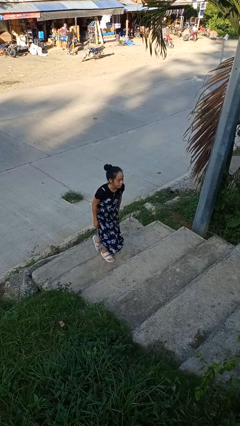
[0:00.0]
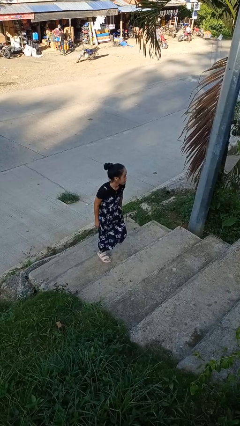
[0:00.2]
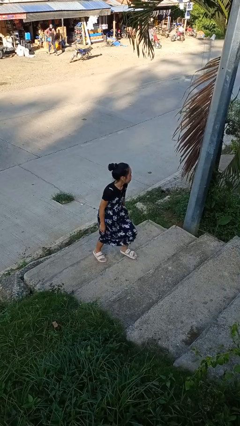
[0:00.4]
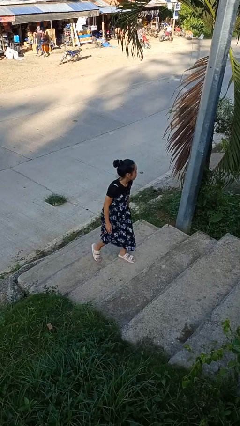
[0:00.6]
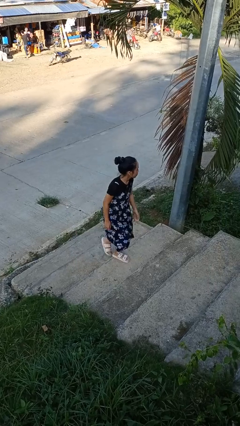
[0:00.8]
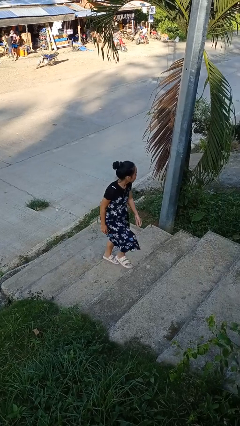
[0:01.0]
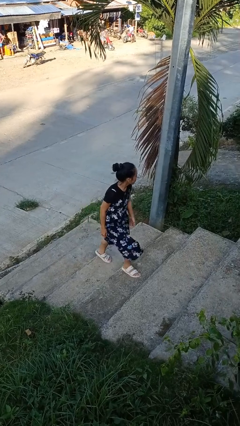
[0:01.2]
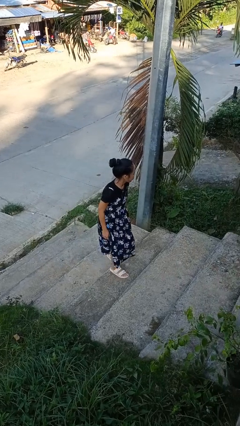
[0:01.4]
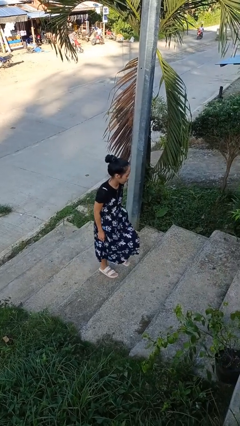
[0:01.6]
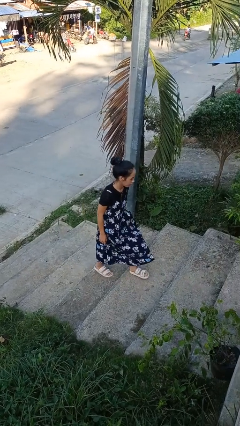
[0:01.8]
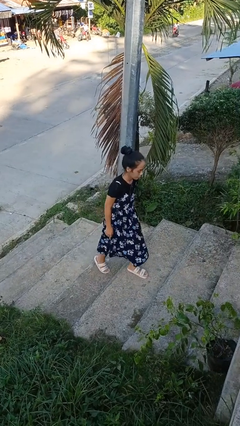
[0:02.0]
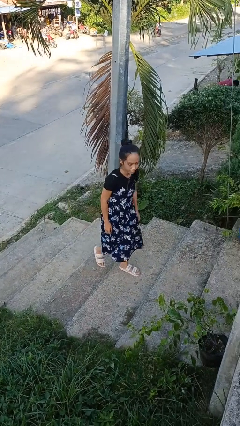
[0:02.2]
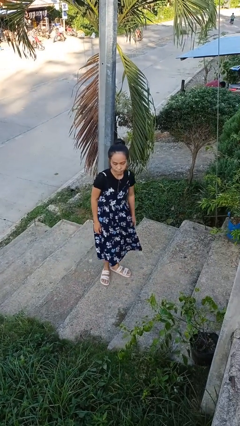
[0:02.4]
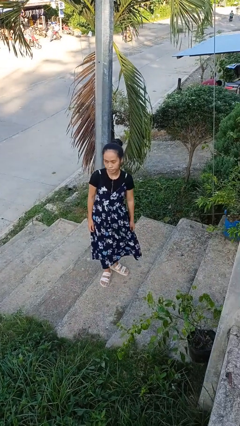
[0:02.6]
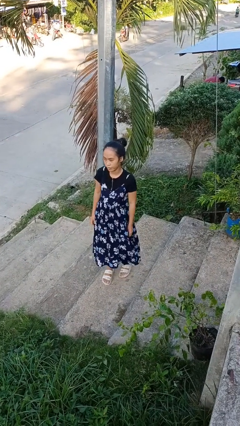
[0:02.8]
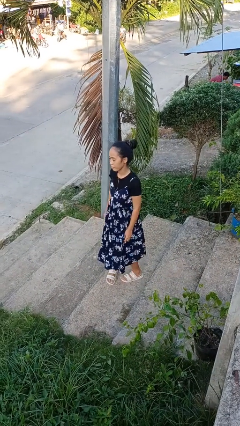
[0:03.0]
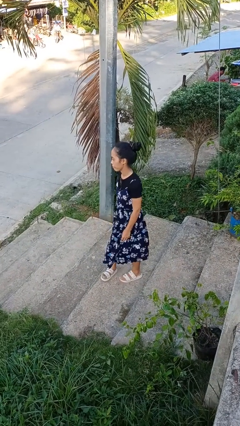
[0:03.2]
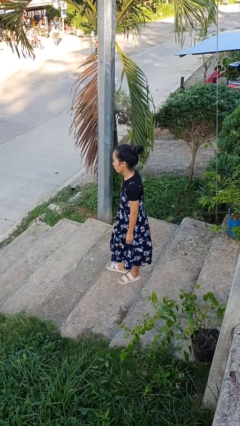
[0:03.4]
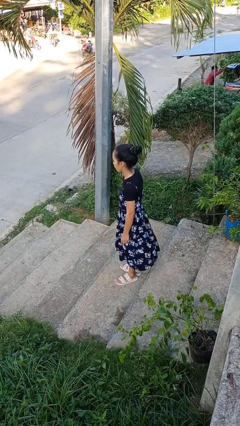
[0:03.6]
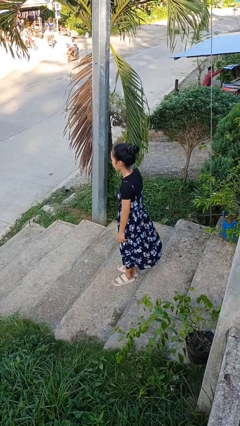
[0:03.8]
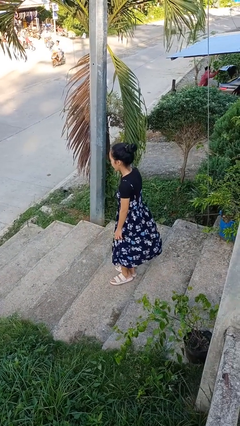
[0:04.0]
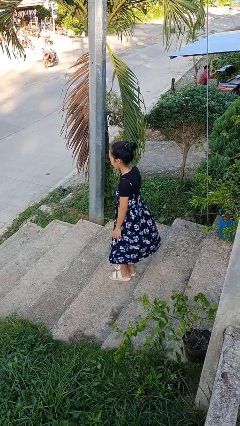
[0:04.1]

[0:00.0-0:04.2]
person climbs up stairs

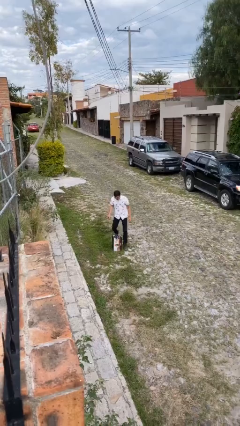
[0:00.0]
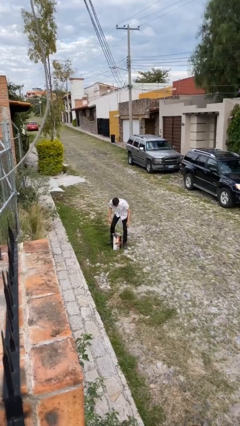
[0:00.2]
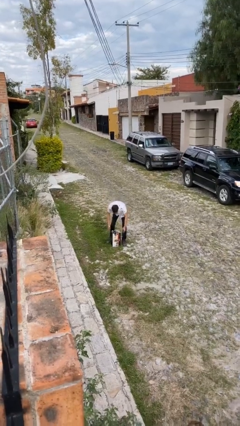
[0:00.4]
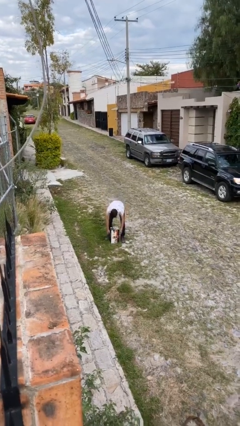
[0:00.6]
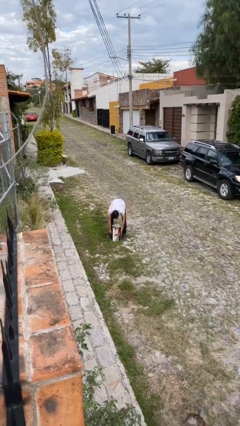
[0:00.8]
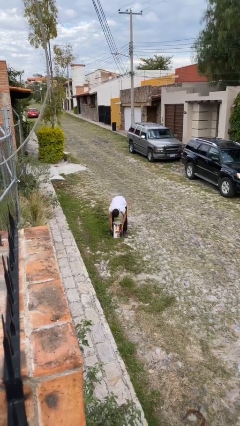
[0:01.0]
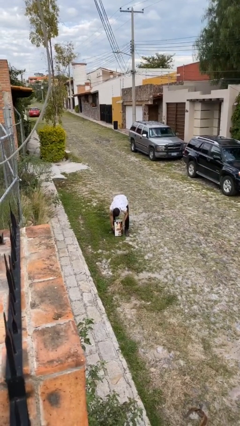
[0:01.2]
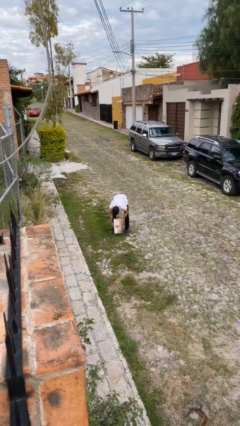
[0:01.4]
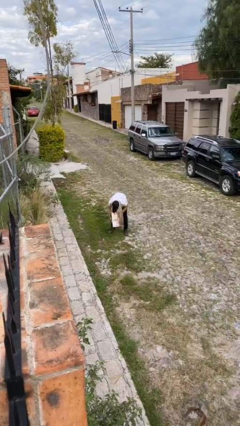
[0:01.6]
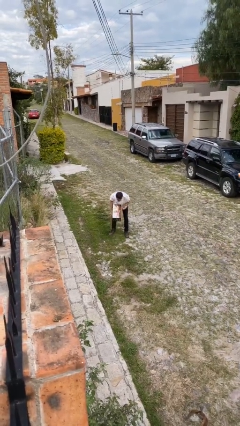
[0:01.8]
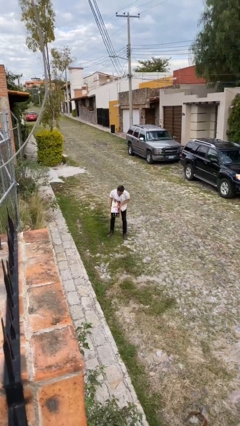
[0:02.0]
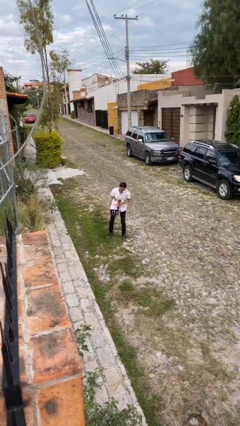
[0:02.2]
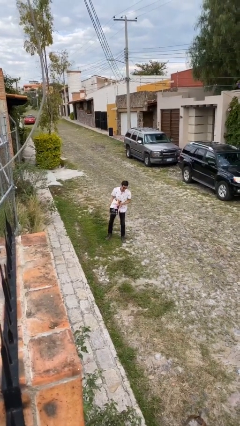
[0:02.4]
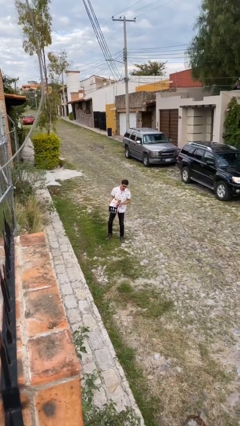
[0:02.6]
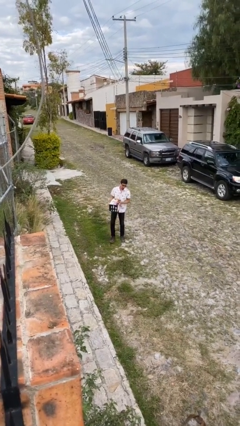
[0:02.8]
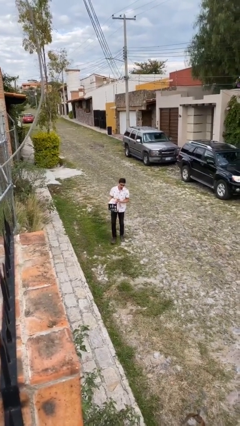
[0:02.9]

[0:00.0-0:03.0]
person picks up object from floor

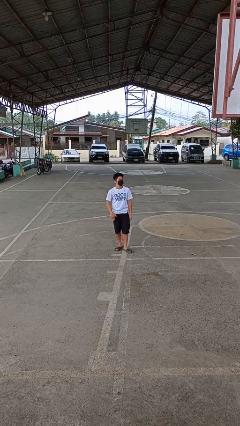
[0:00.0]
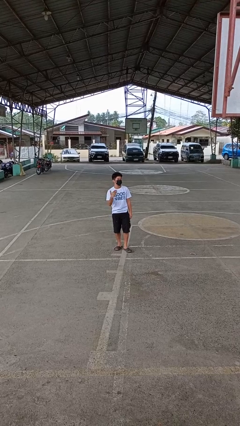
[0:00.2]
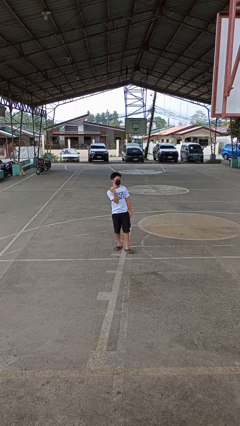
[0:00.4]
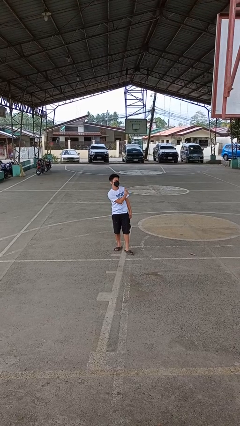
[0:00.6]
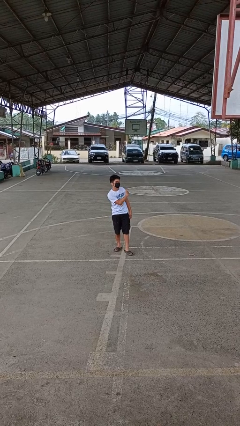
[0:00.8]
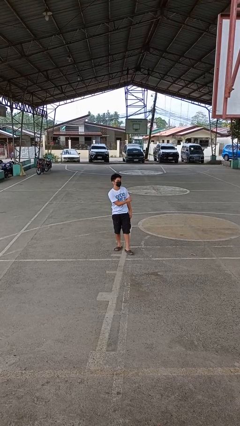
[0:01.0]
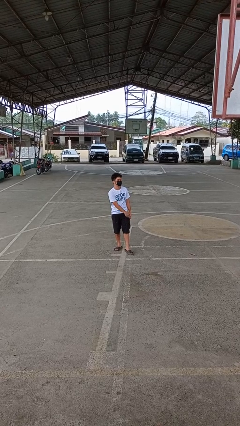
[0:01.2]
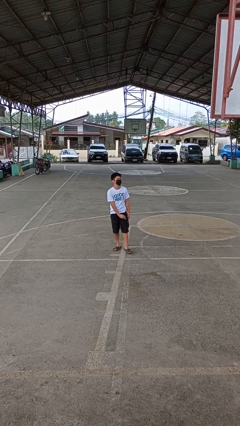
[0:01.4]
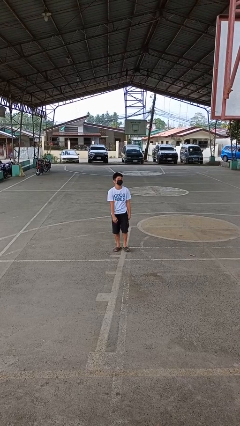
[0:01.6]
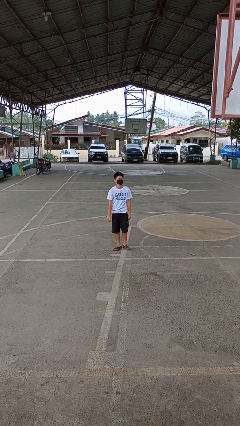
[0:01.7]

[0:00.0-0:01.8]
person gestures cut

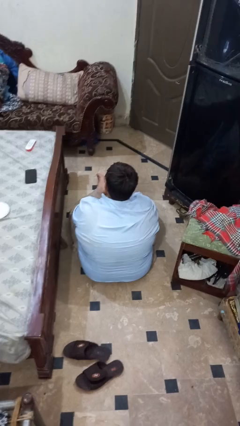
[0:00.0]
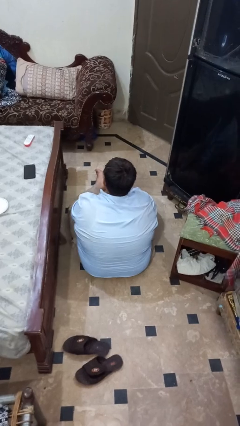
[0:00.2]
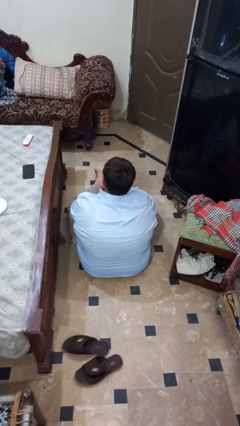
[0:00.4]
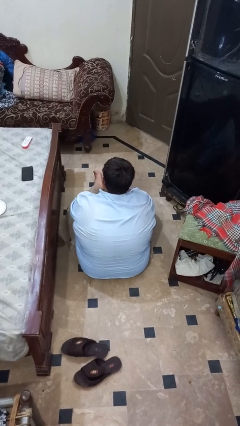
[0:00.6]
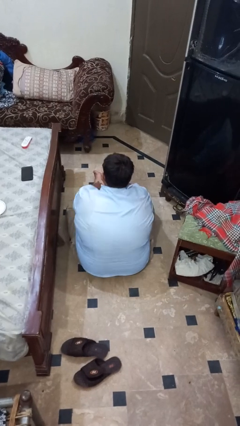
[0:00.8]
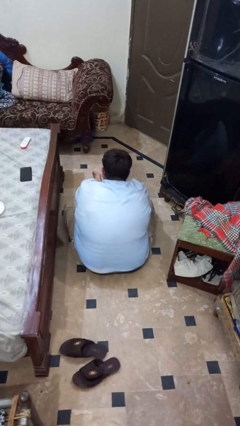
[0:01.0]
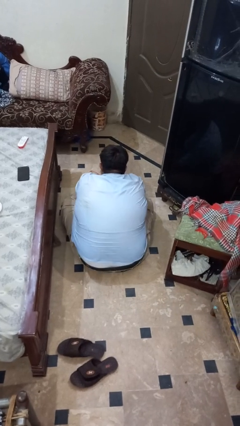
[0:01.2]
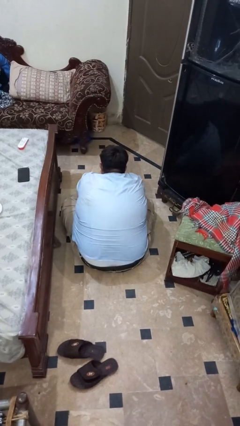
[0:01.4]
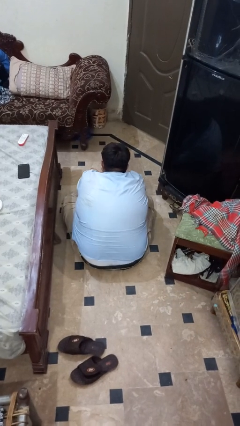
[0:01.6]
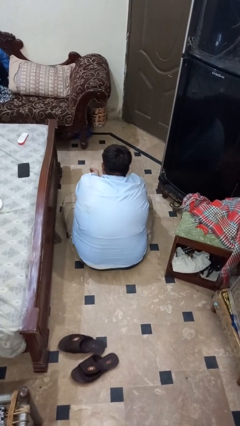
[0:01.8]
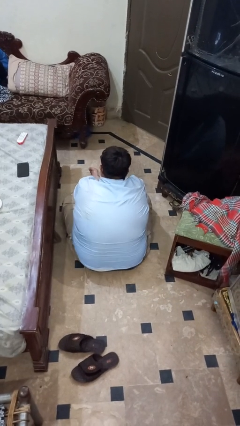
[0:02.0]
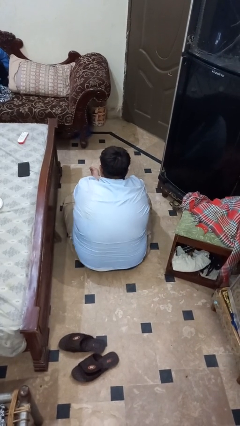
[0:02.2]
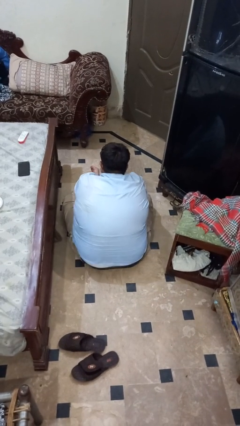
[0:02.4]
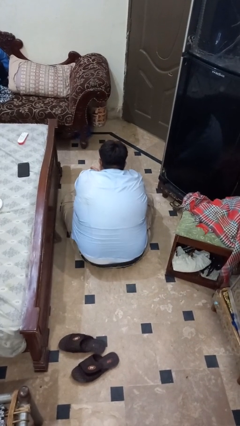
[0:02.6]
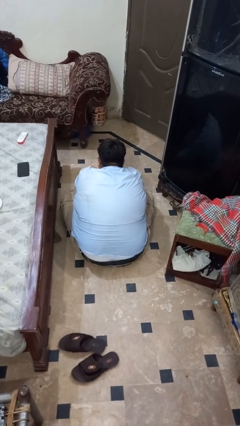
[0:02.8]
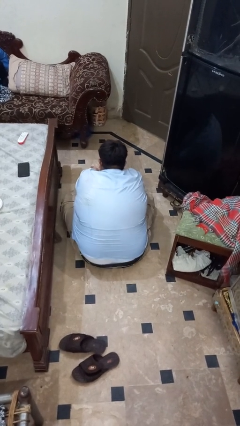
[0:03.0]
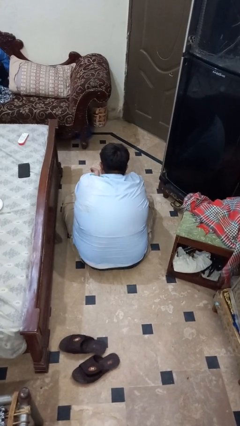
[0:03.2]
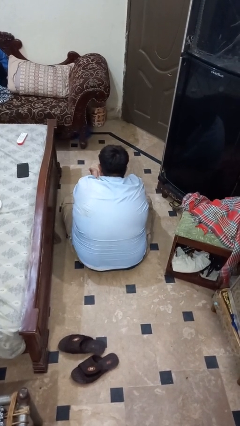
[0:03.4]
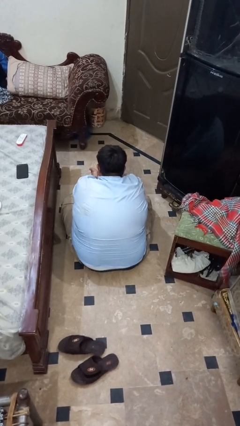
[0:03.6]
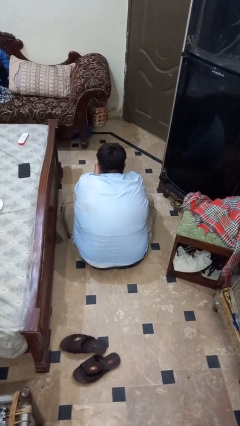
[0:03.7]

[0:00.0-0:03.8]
person rubs foot

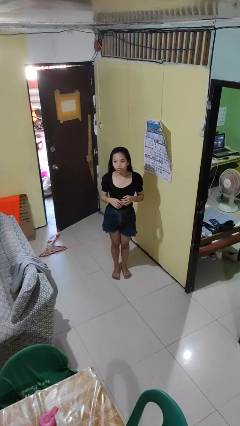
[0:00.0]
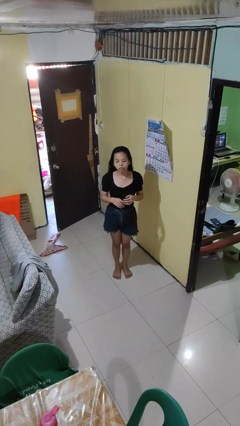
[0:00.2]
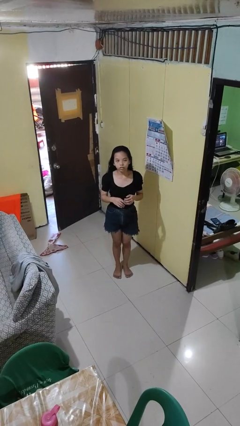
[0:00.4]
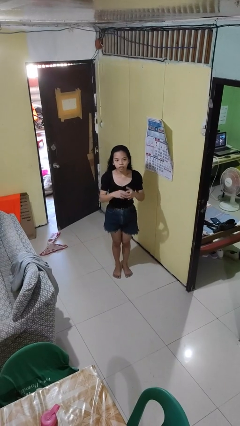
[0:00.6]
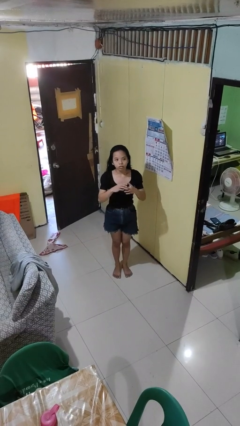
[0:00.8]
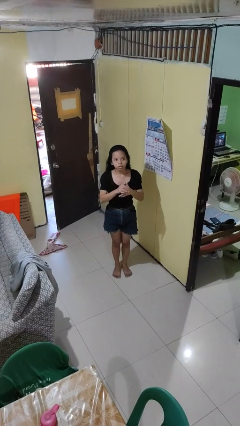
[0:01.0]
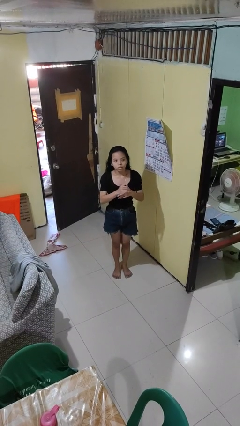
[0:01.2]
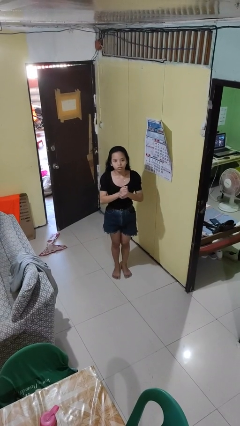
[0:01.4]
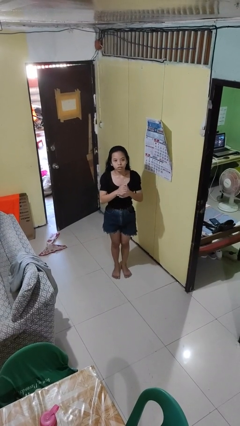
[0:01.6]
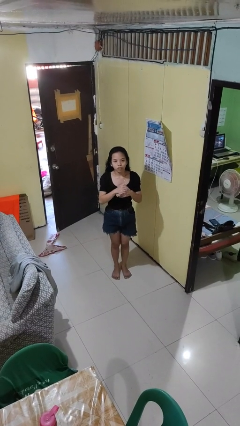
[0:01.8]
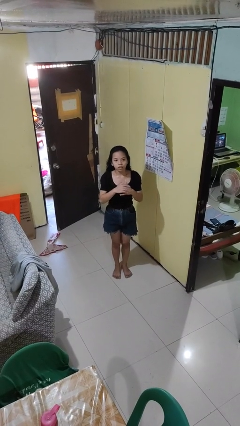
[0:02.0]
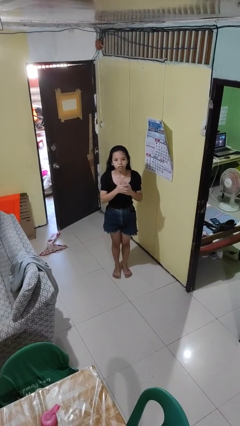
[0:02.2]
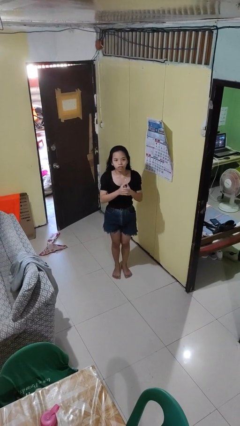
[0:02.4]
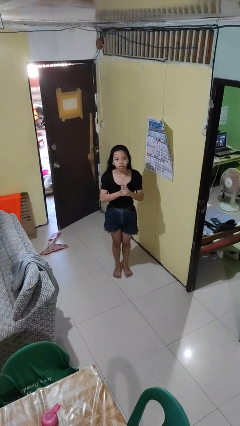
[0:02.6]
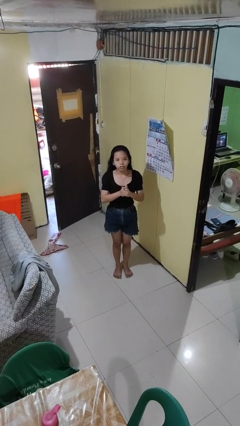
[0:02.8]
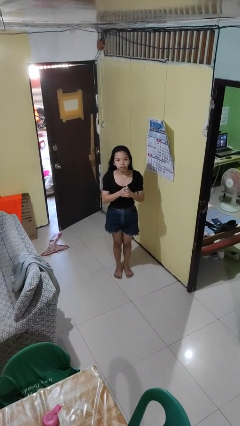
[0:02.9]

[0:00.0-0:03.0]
person cracks knuckles

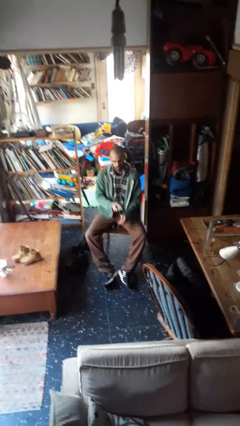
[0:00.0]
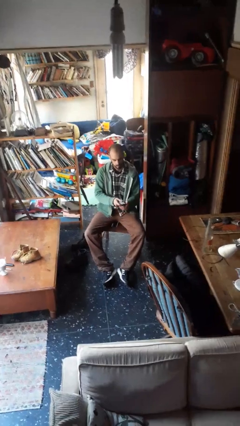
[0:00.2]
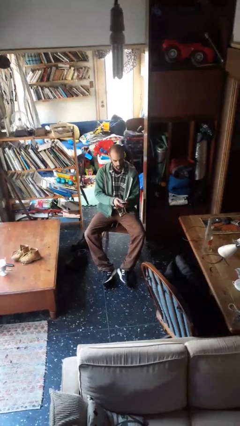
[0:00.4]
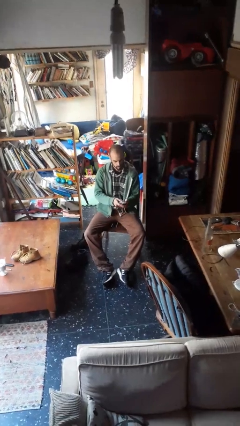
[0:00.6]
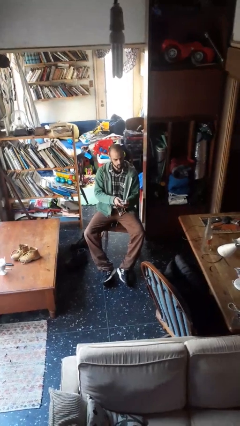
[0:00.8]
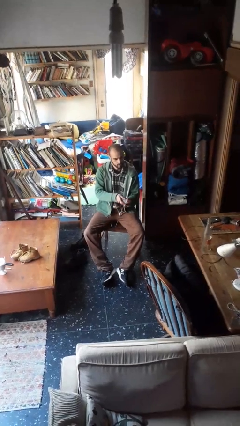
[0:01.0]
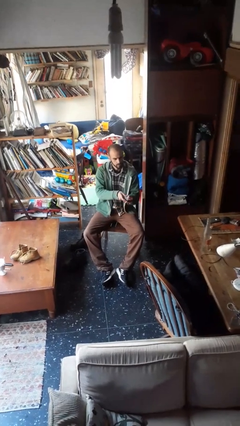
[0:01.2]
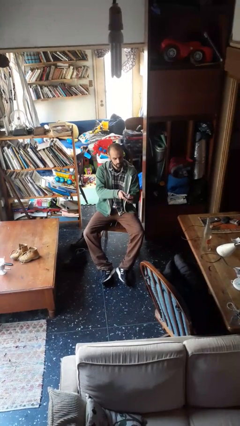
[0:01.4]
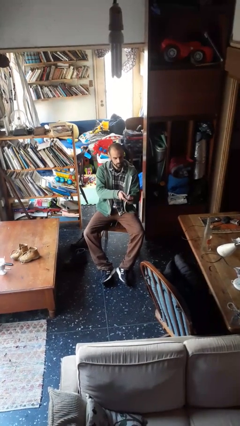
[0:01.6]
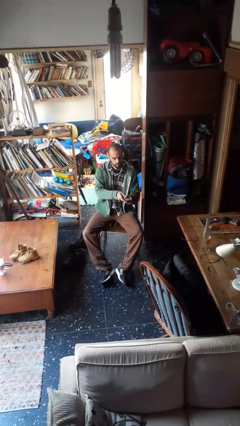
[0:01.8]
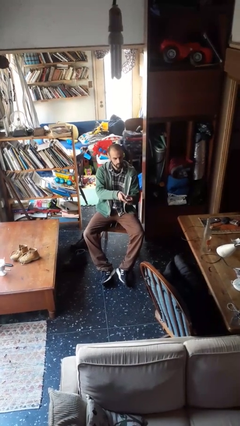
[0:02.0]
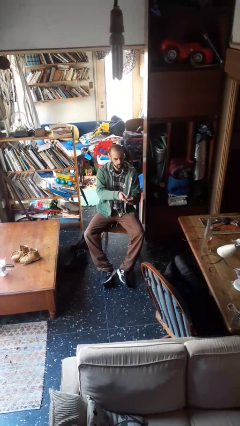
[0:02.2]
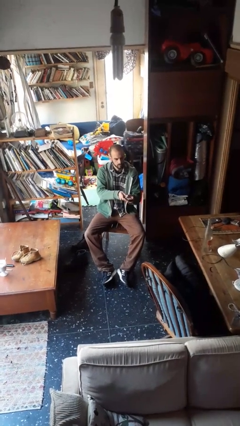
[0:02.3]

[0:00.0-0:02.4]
person uses television remote
